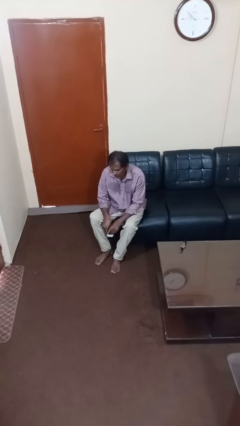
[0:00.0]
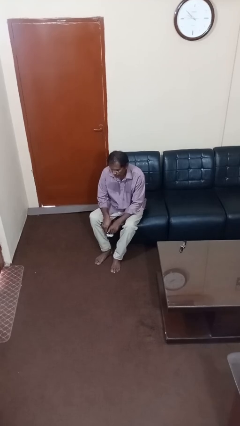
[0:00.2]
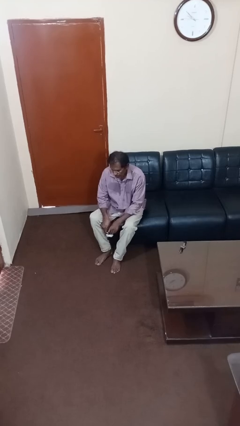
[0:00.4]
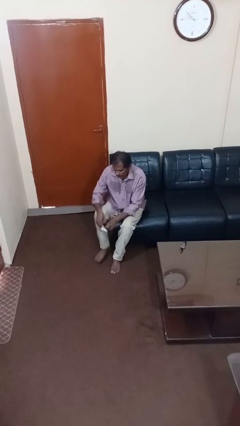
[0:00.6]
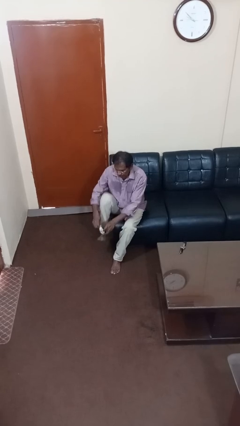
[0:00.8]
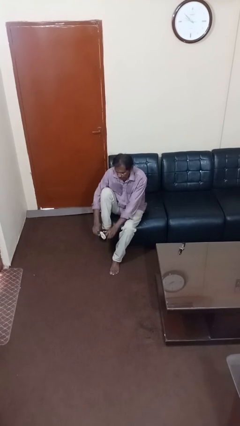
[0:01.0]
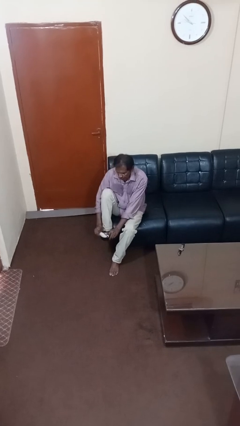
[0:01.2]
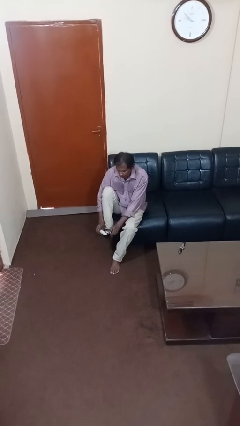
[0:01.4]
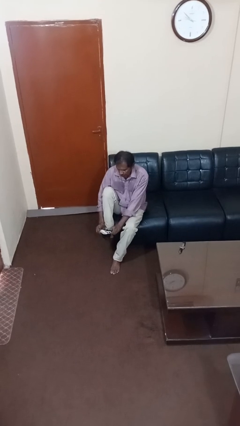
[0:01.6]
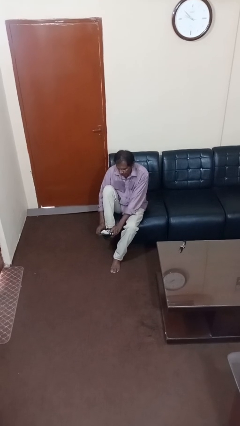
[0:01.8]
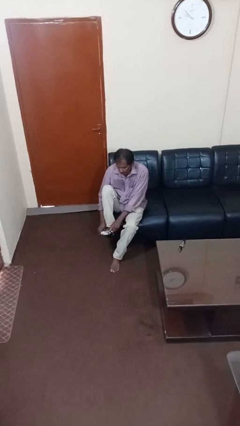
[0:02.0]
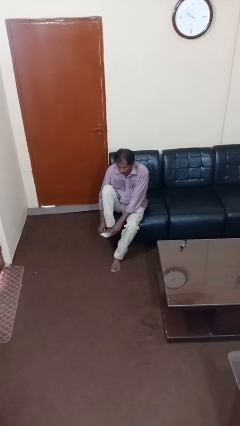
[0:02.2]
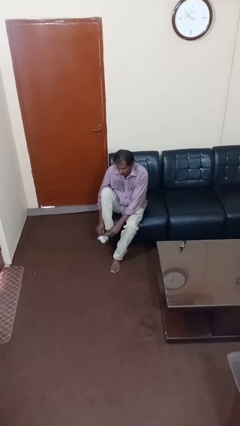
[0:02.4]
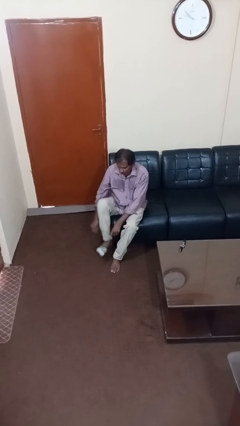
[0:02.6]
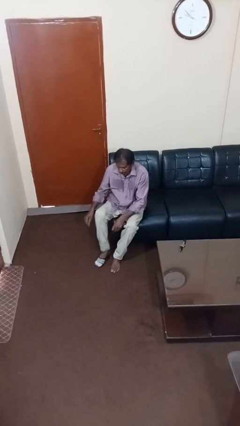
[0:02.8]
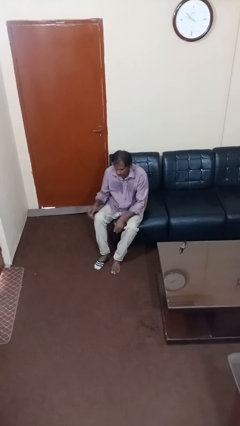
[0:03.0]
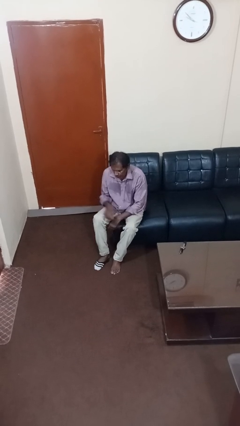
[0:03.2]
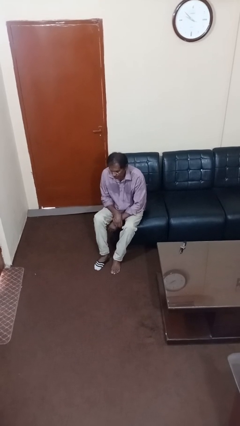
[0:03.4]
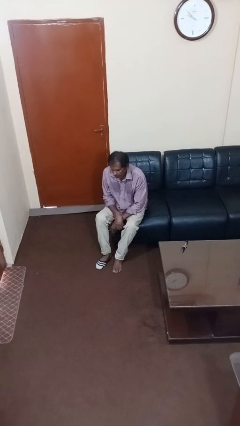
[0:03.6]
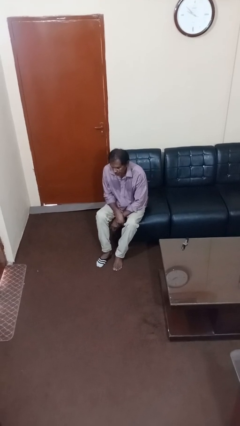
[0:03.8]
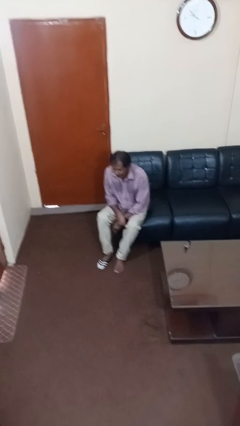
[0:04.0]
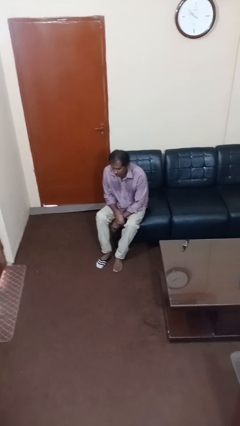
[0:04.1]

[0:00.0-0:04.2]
person puts on socks

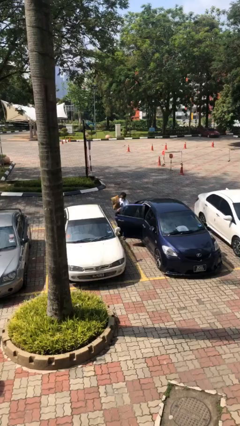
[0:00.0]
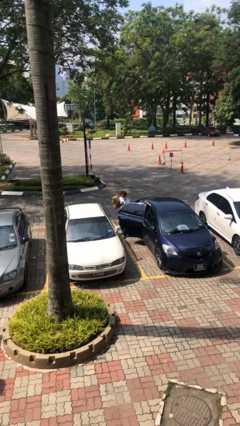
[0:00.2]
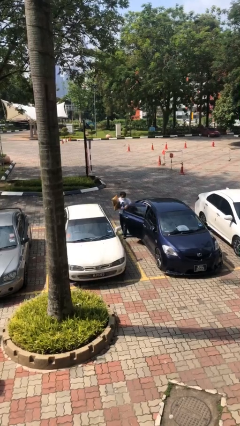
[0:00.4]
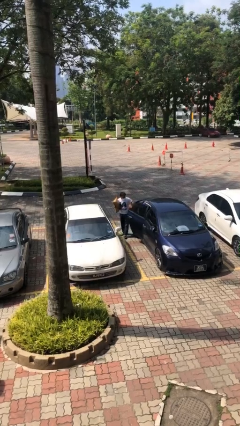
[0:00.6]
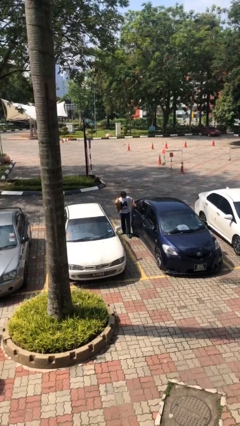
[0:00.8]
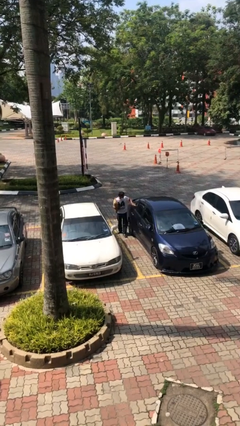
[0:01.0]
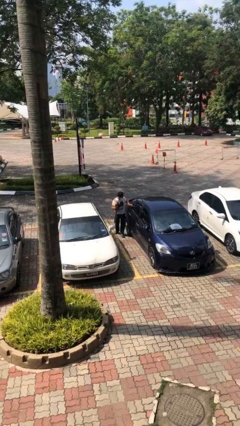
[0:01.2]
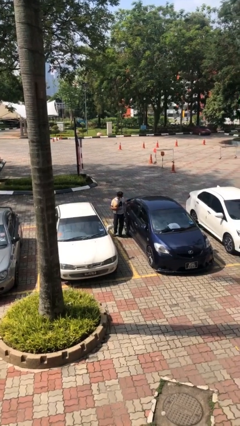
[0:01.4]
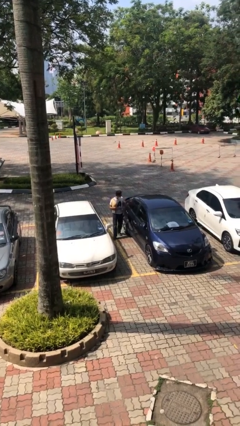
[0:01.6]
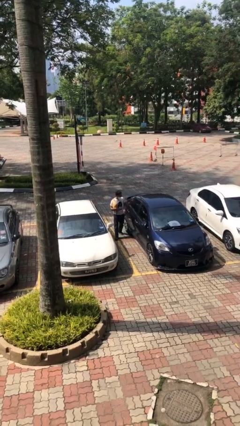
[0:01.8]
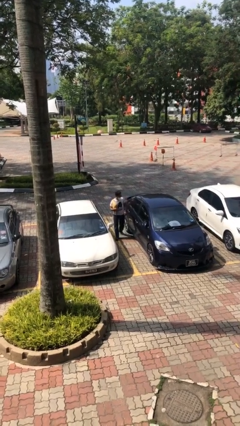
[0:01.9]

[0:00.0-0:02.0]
person closes car door

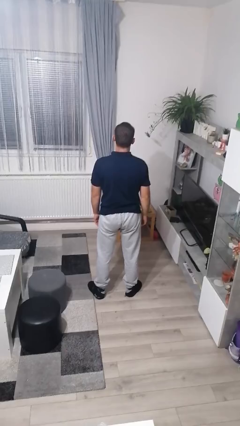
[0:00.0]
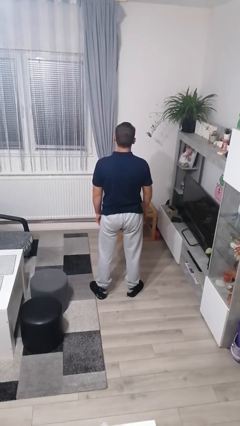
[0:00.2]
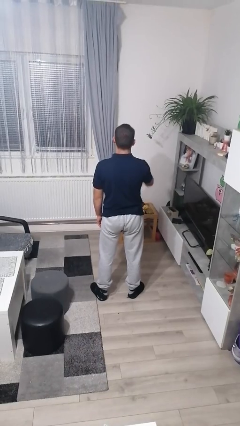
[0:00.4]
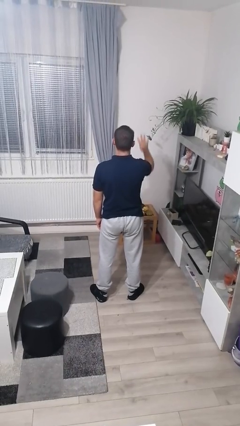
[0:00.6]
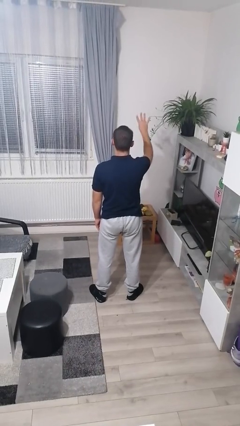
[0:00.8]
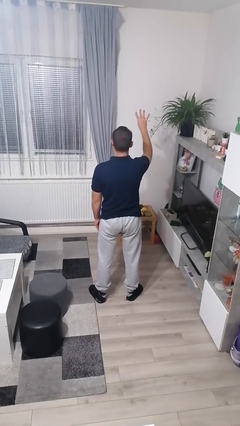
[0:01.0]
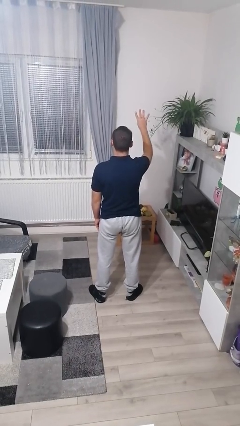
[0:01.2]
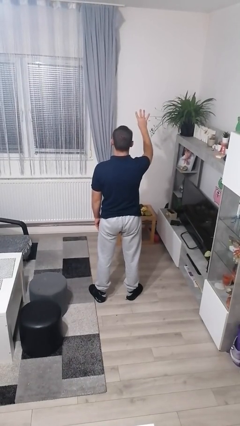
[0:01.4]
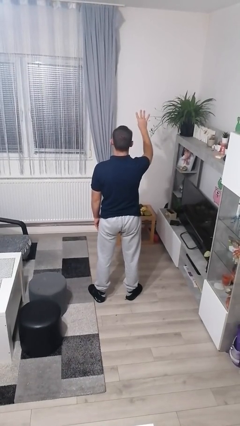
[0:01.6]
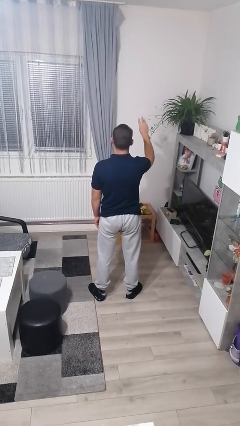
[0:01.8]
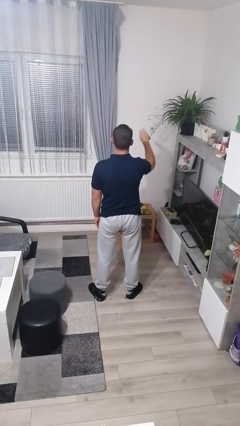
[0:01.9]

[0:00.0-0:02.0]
person gestures number four

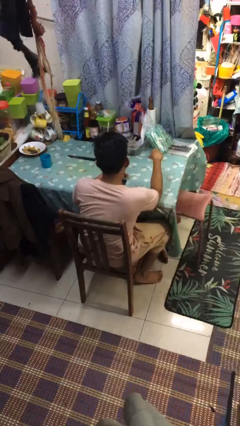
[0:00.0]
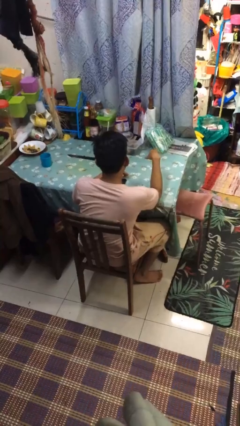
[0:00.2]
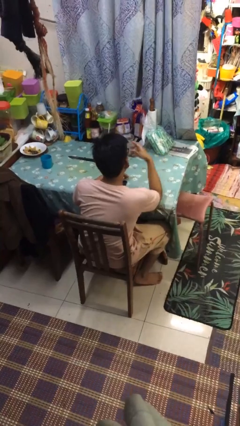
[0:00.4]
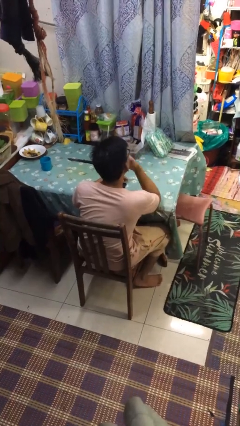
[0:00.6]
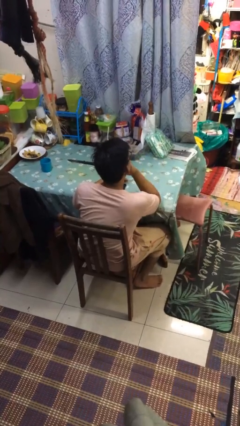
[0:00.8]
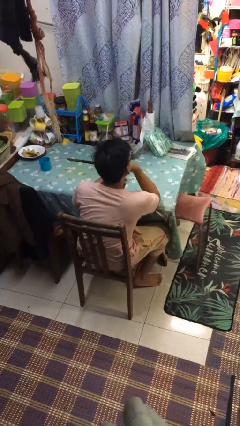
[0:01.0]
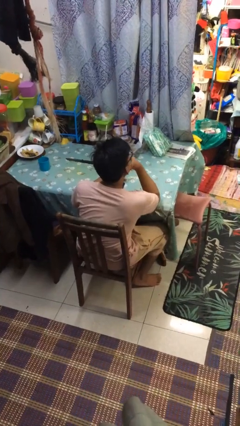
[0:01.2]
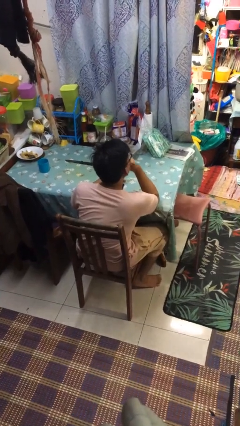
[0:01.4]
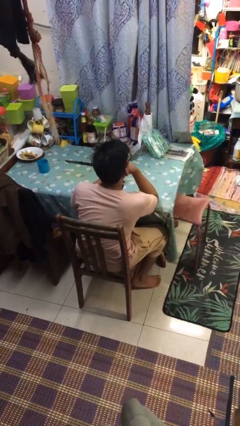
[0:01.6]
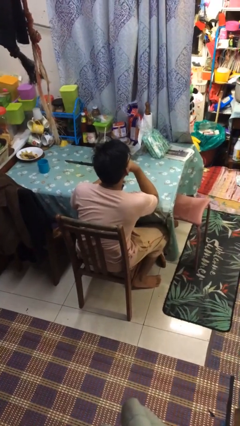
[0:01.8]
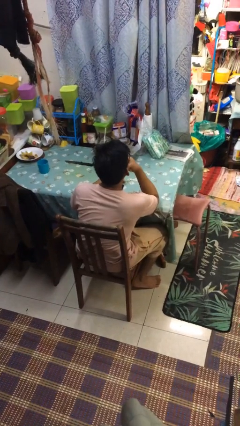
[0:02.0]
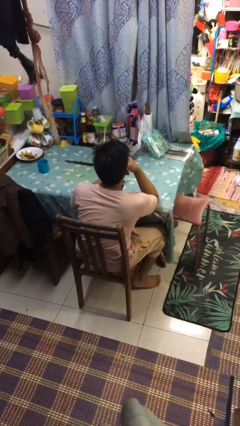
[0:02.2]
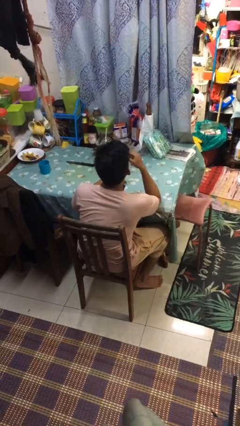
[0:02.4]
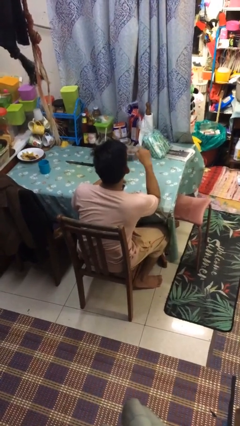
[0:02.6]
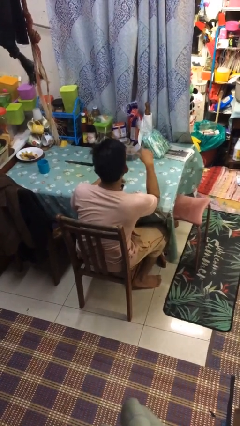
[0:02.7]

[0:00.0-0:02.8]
person strokes chin

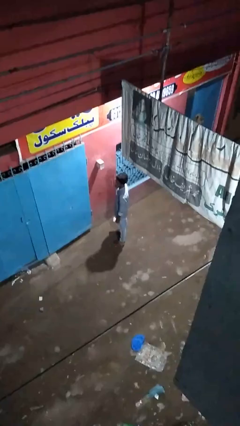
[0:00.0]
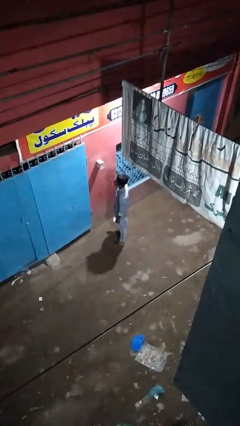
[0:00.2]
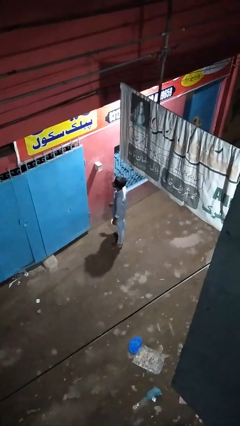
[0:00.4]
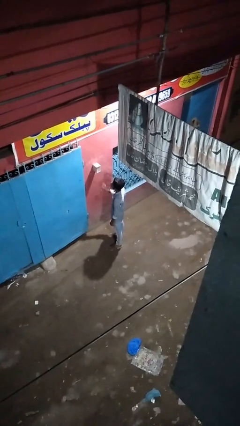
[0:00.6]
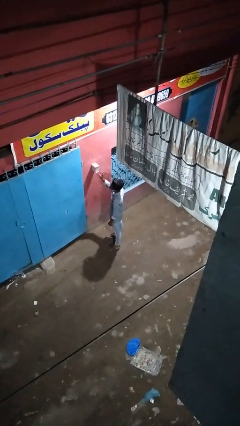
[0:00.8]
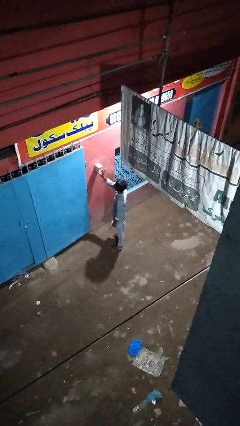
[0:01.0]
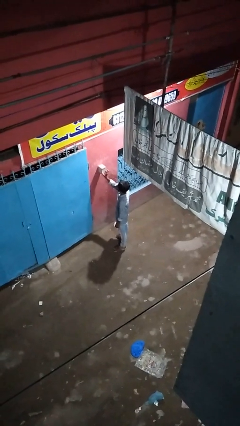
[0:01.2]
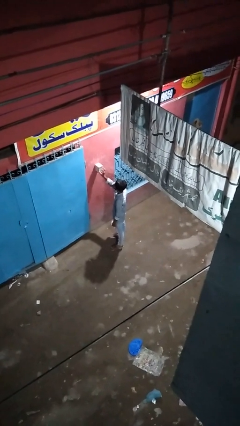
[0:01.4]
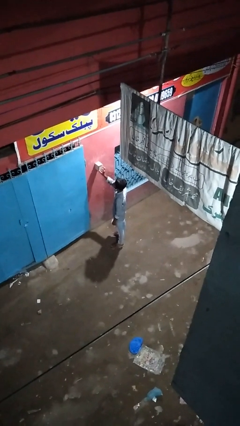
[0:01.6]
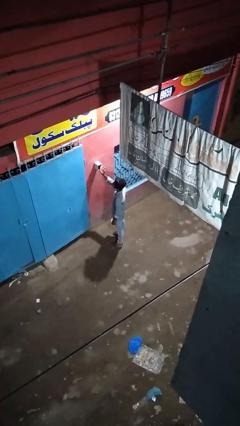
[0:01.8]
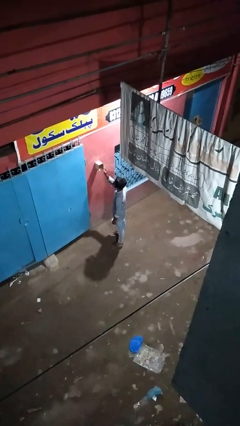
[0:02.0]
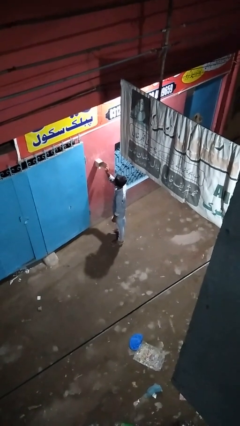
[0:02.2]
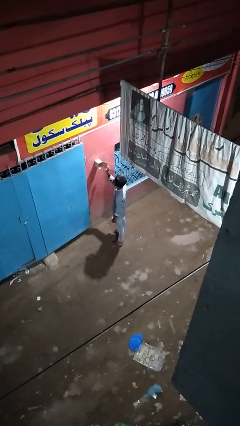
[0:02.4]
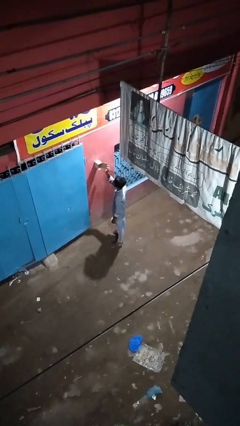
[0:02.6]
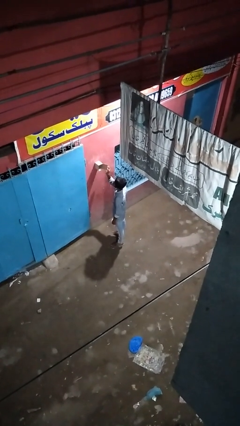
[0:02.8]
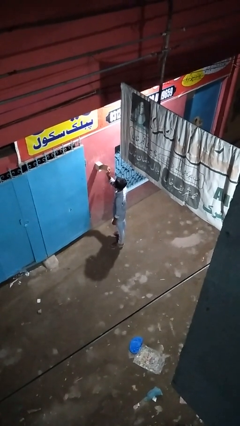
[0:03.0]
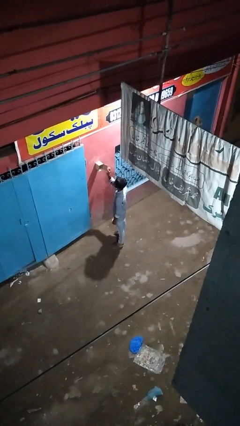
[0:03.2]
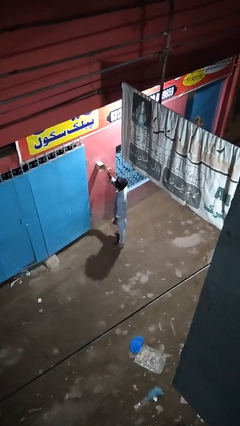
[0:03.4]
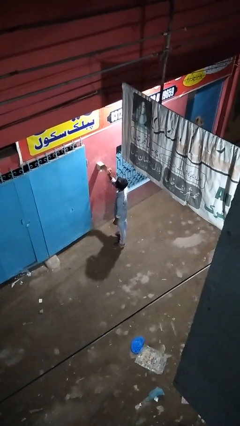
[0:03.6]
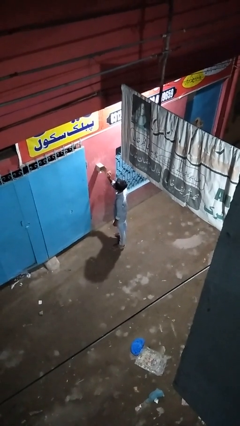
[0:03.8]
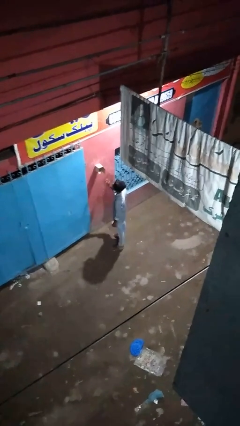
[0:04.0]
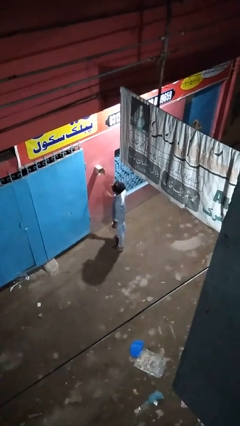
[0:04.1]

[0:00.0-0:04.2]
person opens mailbox

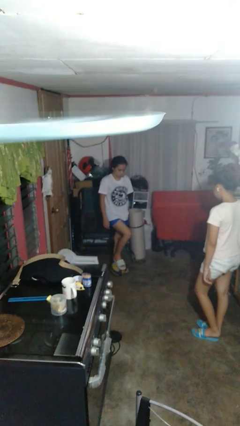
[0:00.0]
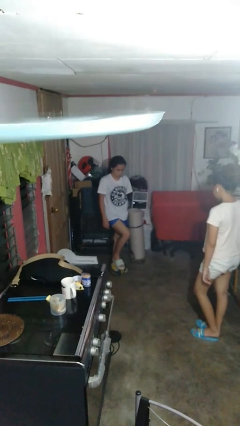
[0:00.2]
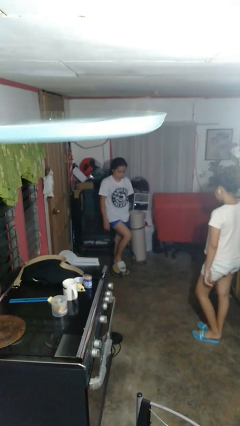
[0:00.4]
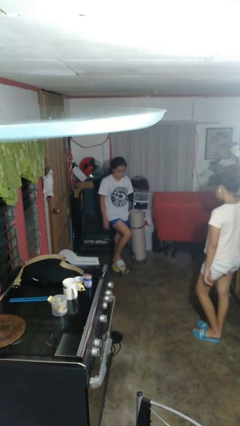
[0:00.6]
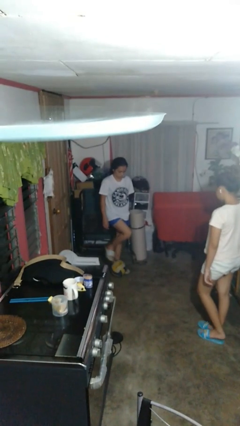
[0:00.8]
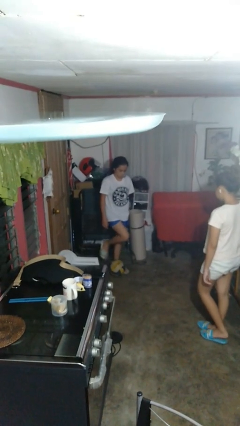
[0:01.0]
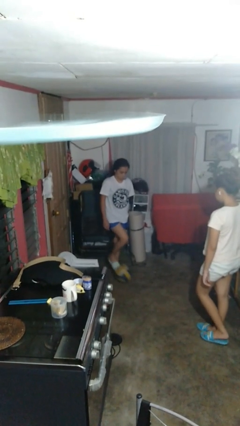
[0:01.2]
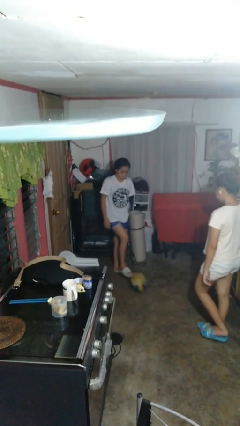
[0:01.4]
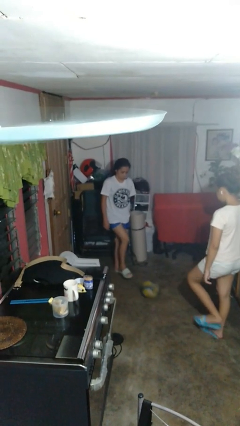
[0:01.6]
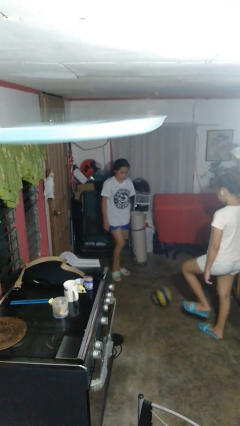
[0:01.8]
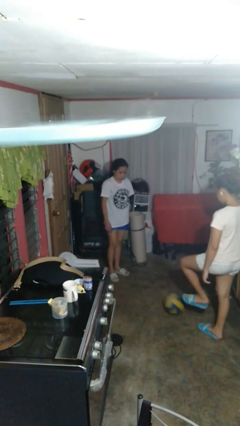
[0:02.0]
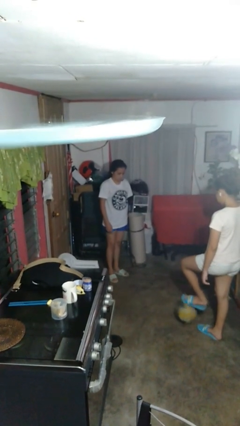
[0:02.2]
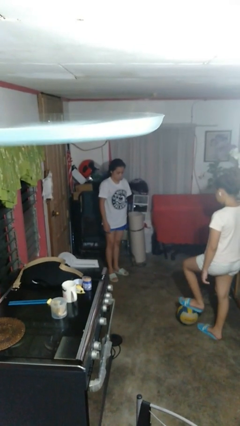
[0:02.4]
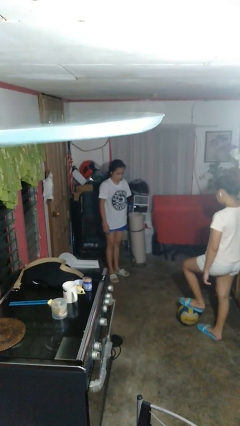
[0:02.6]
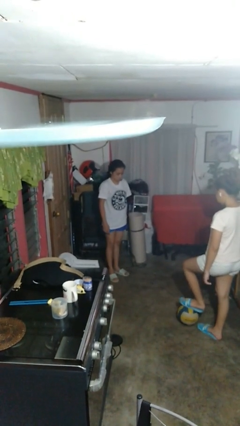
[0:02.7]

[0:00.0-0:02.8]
person kicks object to person
